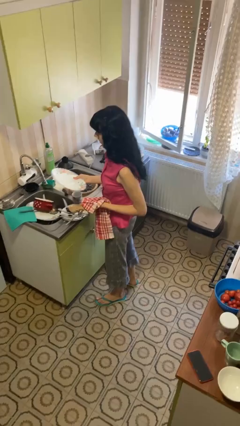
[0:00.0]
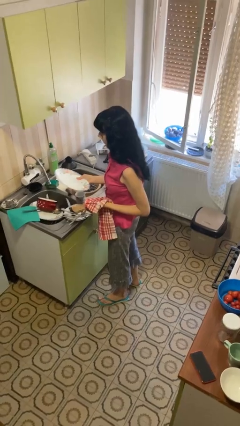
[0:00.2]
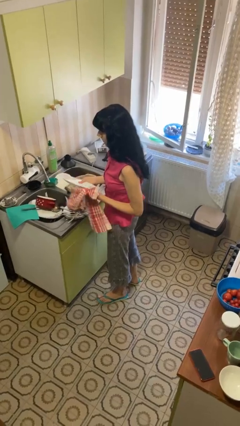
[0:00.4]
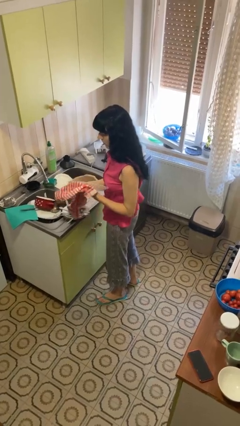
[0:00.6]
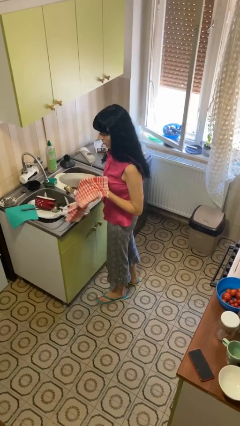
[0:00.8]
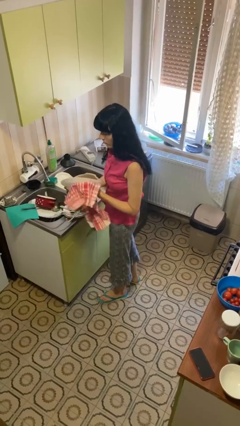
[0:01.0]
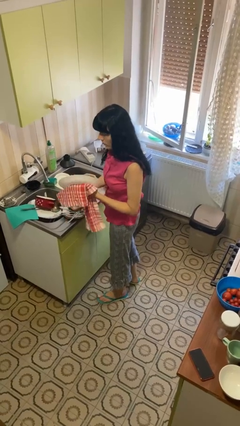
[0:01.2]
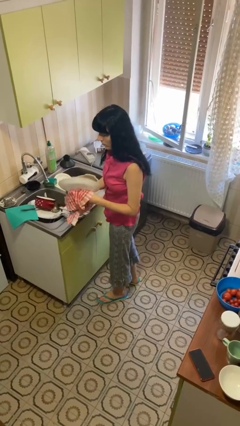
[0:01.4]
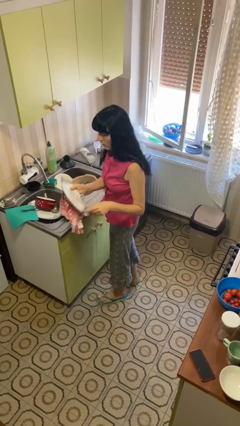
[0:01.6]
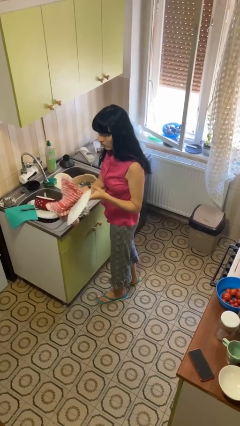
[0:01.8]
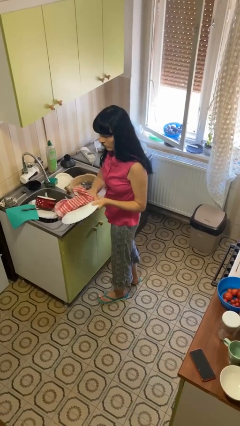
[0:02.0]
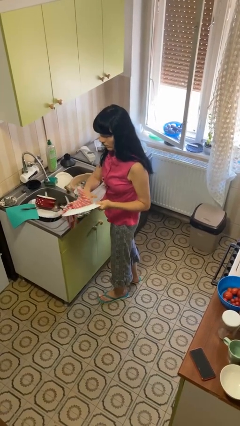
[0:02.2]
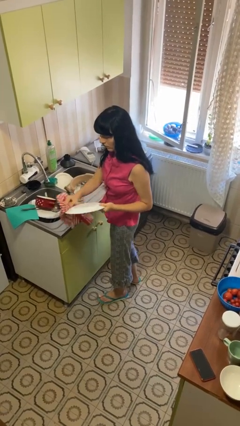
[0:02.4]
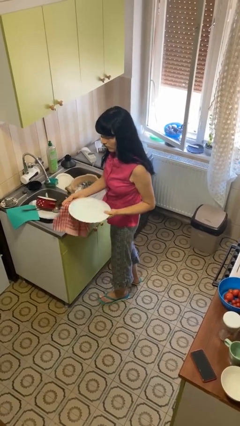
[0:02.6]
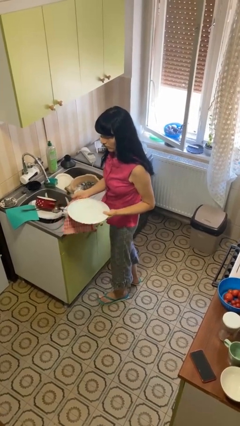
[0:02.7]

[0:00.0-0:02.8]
person dries dish

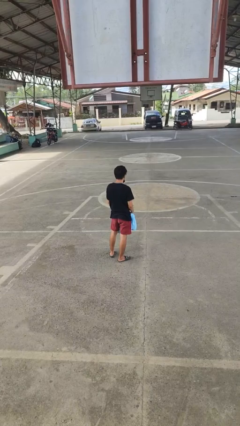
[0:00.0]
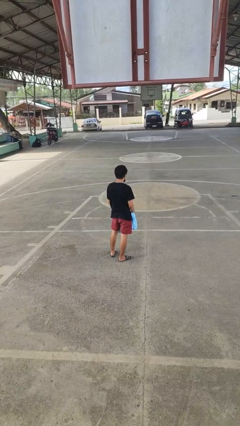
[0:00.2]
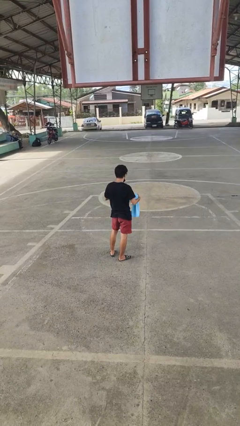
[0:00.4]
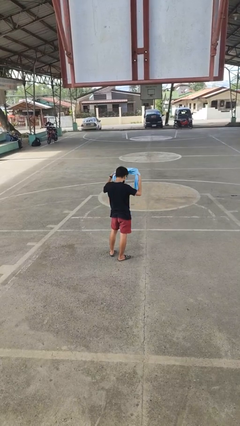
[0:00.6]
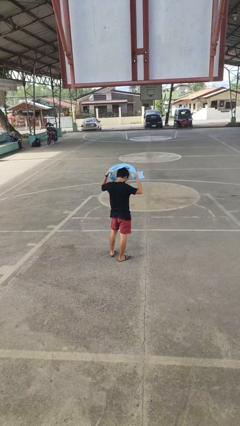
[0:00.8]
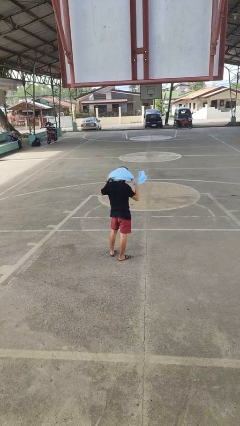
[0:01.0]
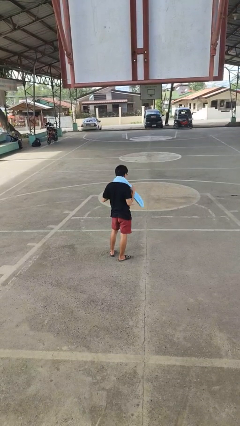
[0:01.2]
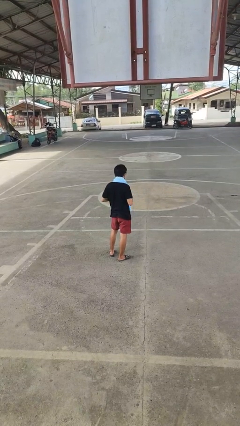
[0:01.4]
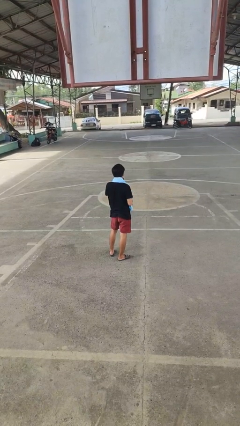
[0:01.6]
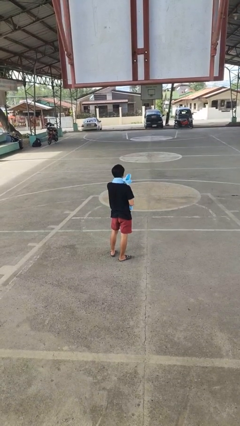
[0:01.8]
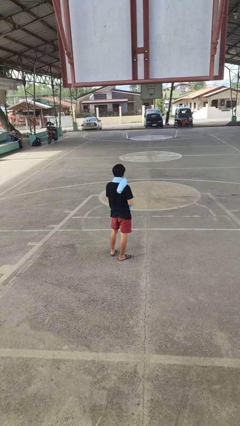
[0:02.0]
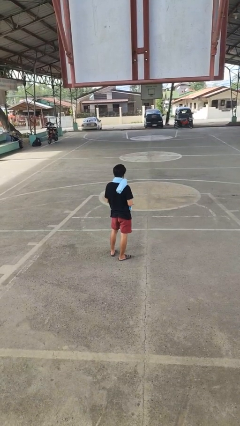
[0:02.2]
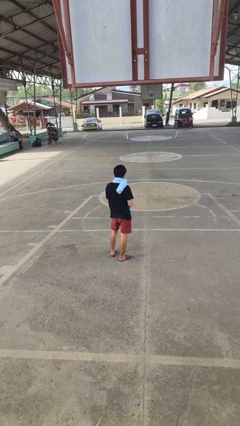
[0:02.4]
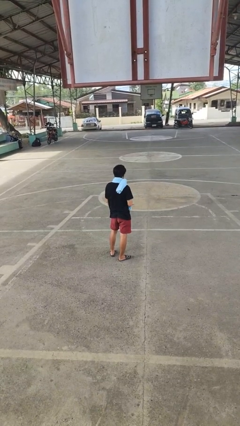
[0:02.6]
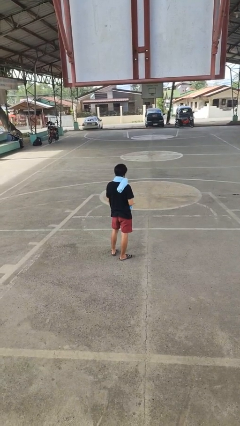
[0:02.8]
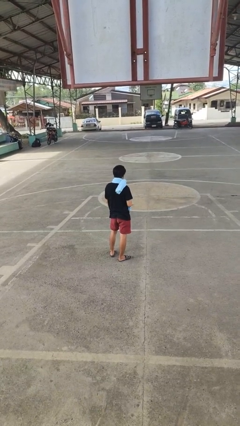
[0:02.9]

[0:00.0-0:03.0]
person puts on scarf

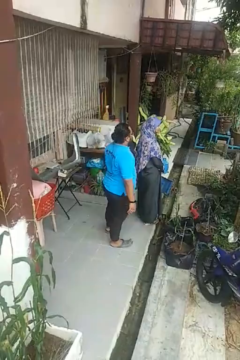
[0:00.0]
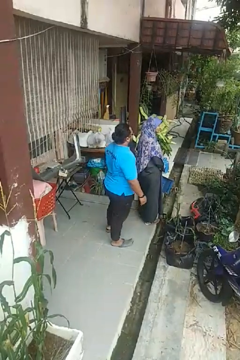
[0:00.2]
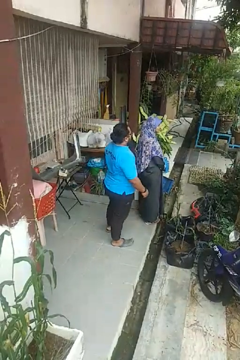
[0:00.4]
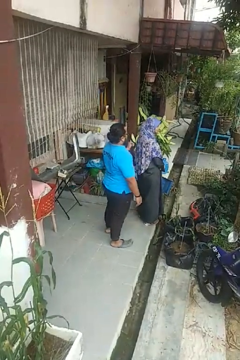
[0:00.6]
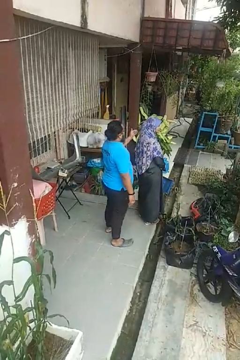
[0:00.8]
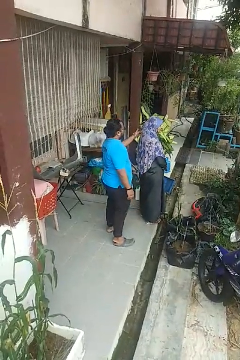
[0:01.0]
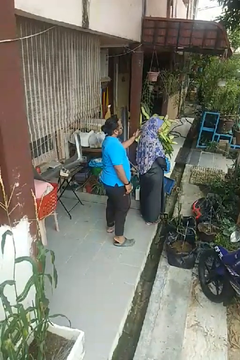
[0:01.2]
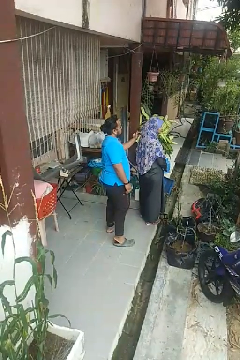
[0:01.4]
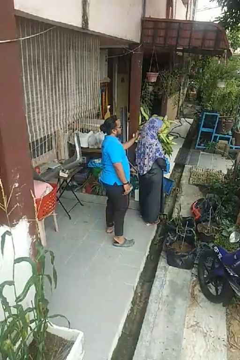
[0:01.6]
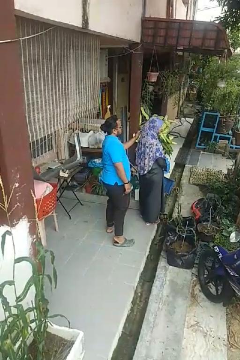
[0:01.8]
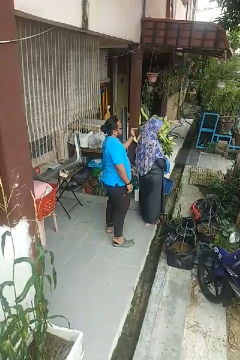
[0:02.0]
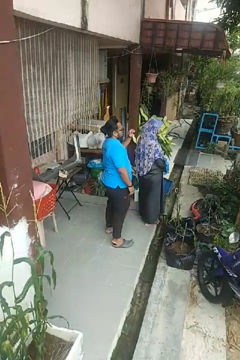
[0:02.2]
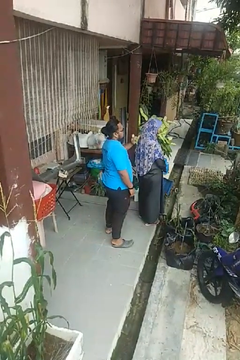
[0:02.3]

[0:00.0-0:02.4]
person touches back of person

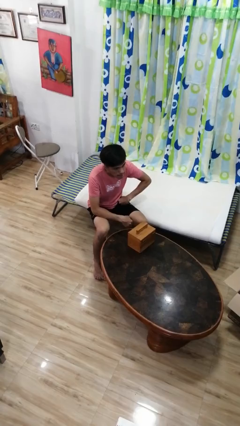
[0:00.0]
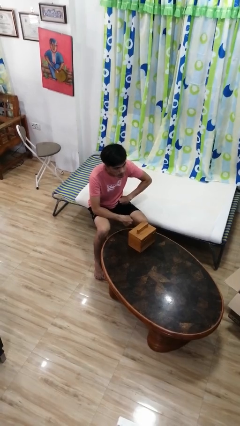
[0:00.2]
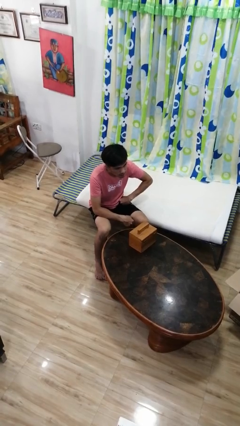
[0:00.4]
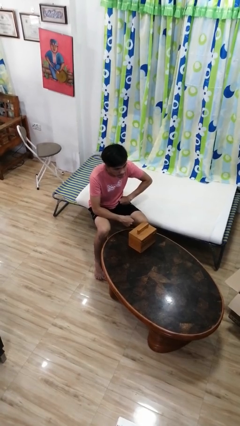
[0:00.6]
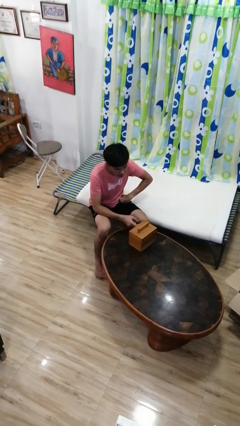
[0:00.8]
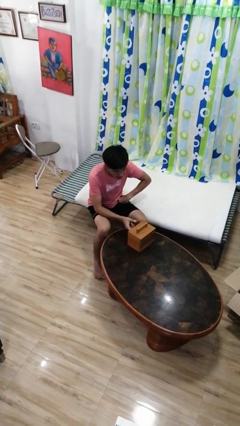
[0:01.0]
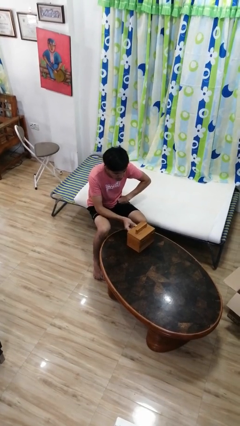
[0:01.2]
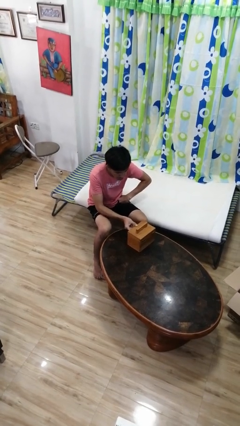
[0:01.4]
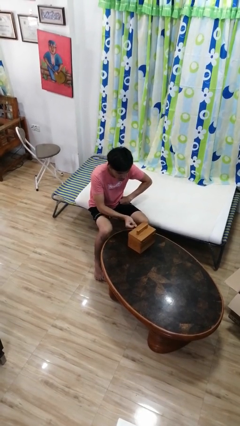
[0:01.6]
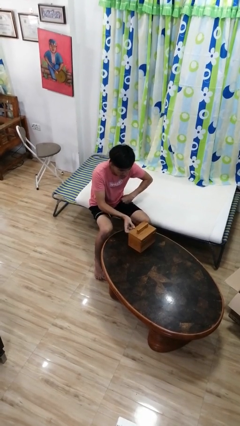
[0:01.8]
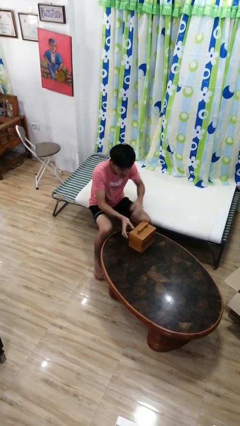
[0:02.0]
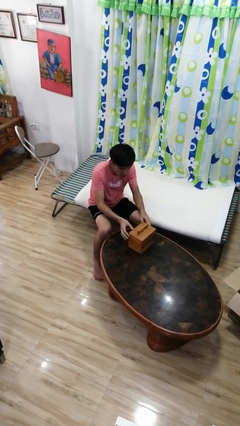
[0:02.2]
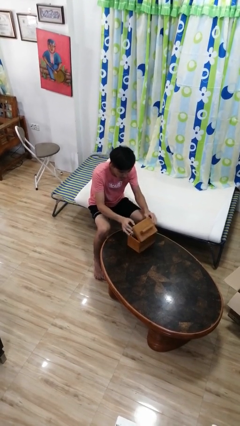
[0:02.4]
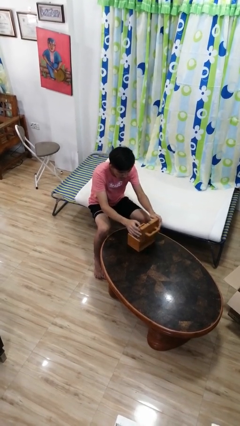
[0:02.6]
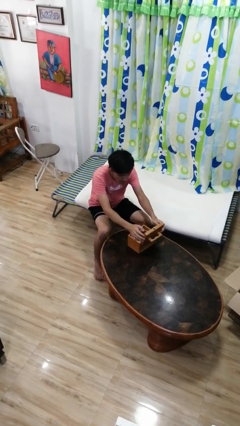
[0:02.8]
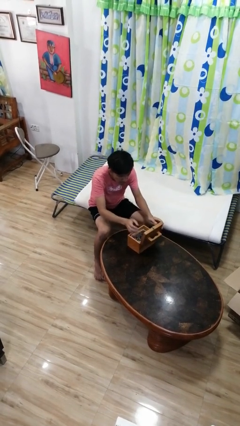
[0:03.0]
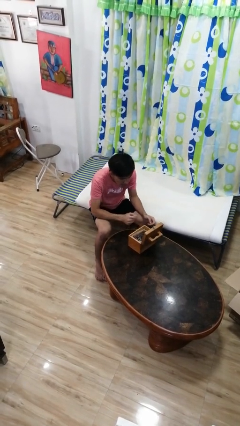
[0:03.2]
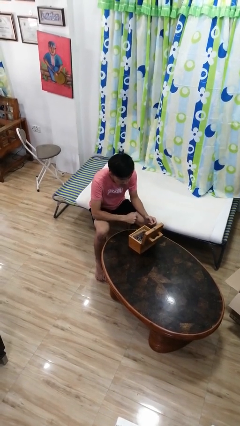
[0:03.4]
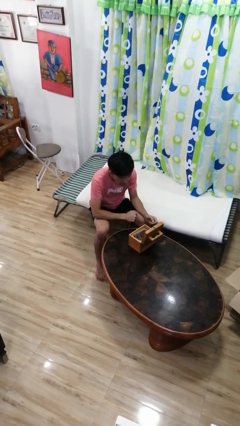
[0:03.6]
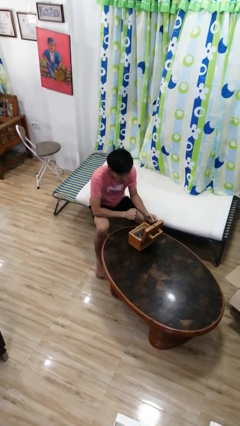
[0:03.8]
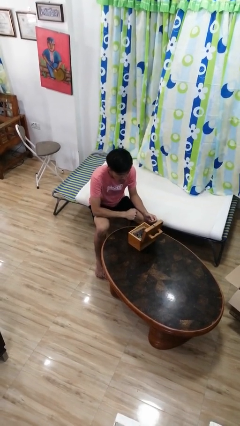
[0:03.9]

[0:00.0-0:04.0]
person opens jewelry box

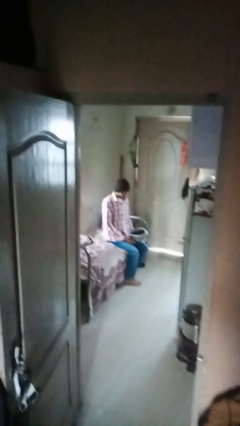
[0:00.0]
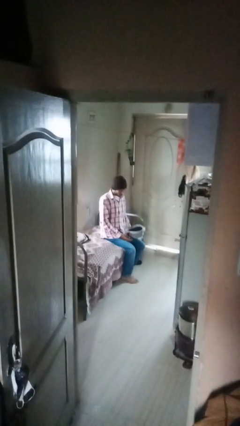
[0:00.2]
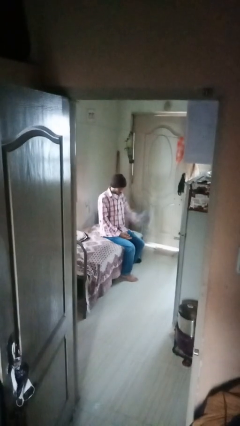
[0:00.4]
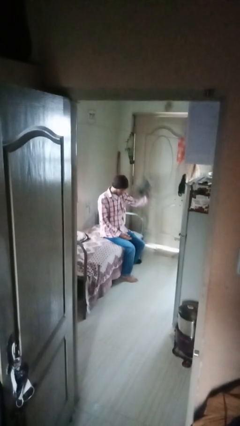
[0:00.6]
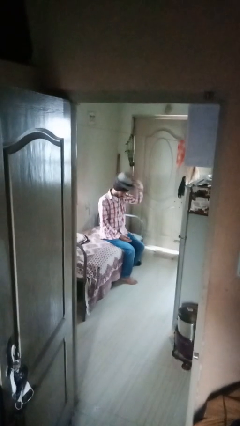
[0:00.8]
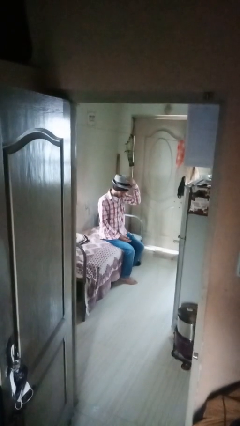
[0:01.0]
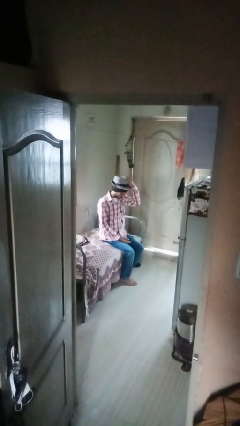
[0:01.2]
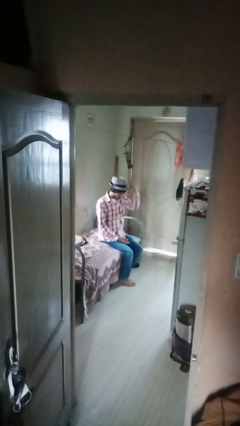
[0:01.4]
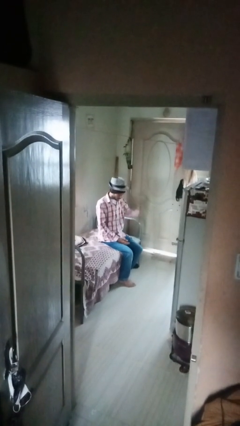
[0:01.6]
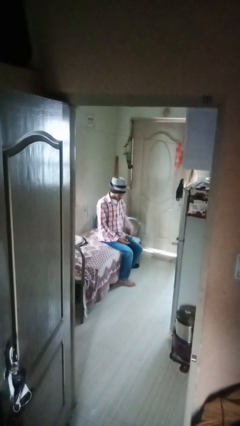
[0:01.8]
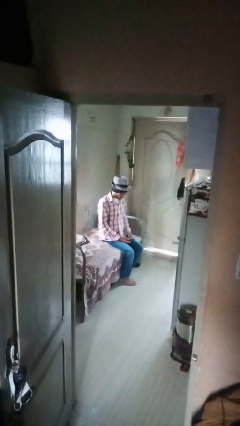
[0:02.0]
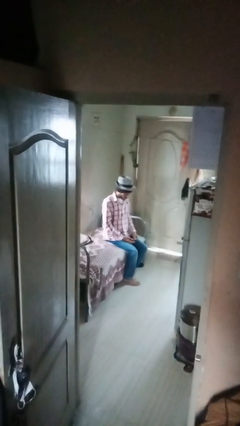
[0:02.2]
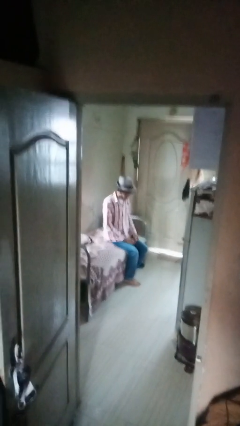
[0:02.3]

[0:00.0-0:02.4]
person puts on hat

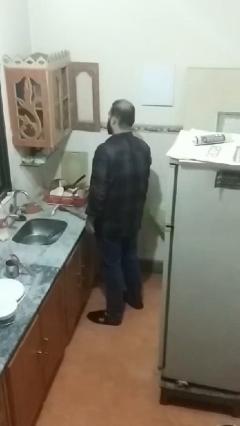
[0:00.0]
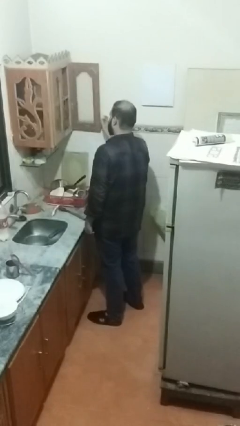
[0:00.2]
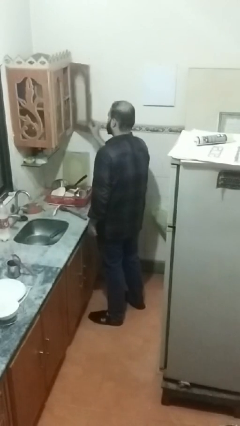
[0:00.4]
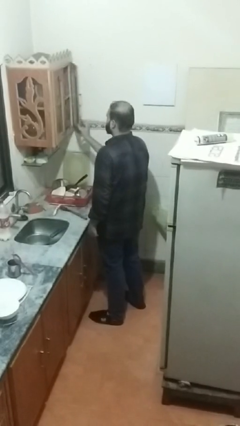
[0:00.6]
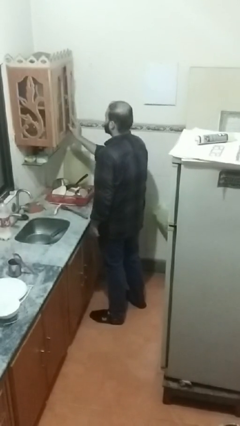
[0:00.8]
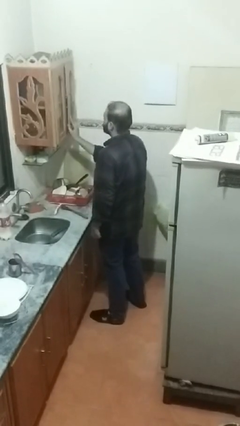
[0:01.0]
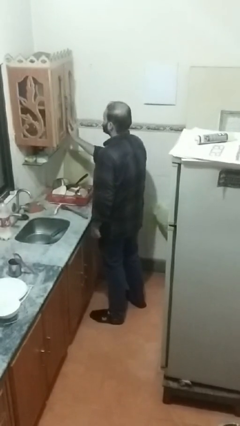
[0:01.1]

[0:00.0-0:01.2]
person closes kitchen drawer

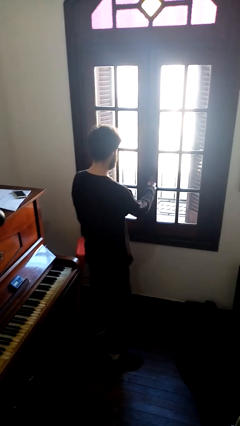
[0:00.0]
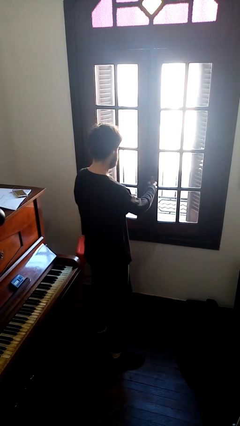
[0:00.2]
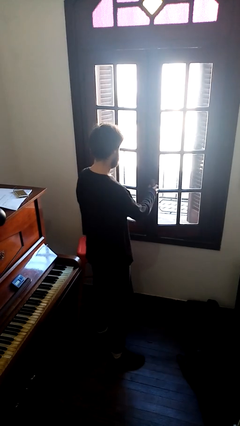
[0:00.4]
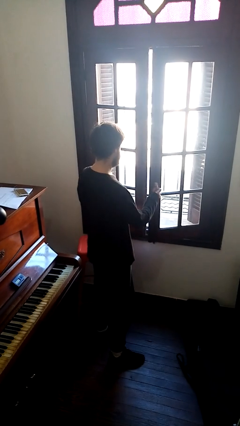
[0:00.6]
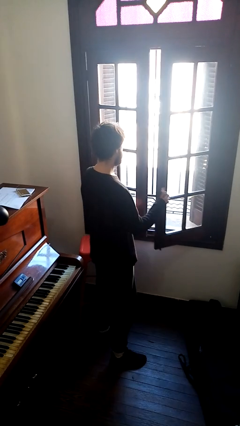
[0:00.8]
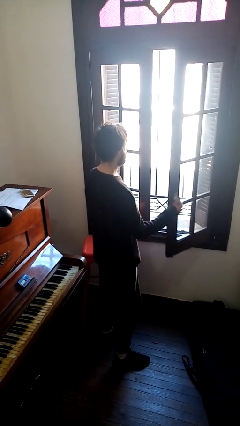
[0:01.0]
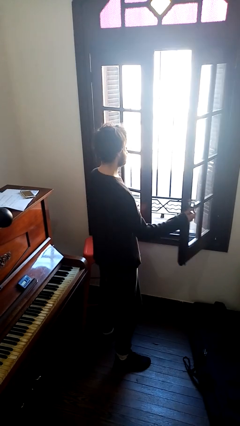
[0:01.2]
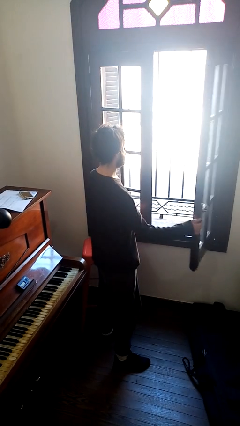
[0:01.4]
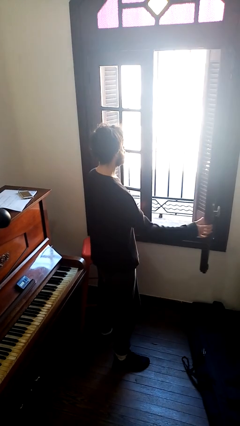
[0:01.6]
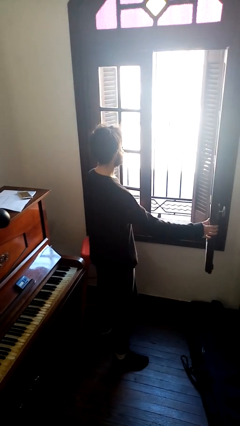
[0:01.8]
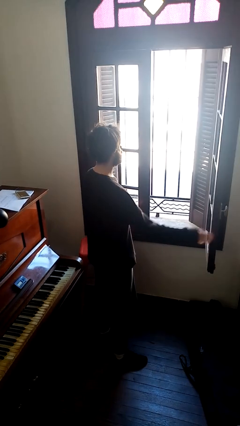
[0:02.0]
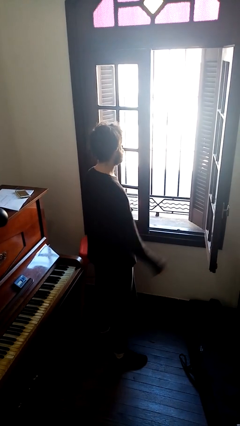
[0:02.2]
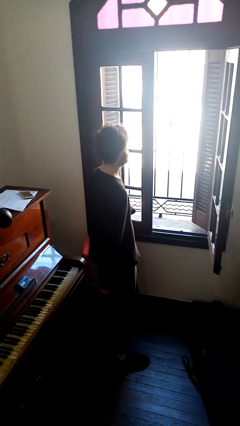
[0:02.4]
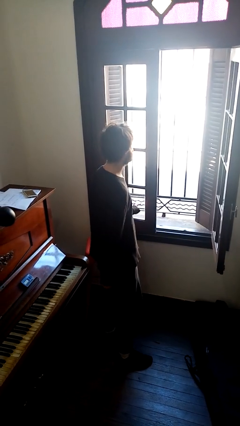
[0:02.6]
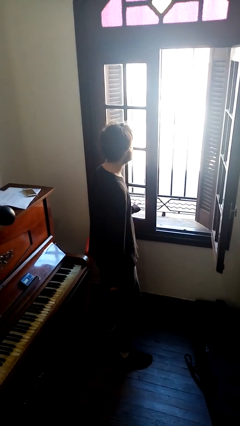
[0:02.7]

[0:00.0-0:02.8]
person opens home window
